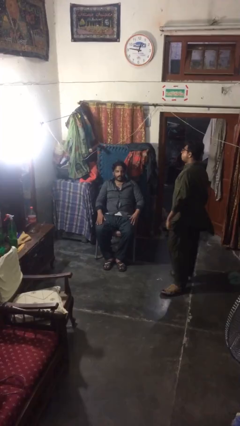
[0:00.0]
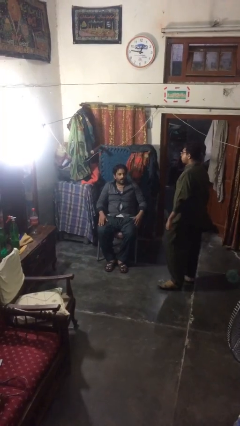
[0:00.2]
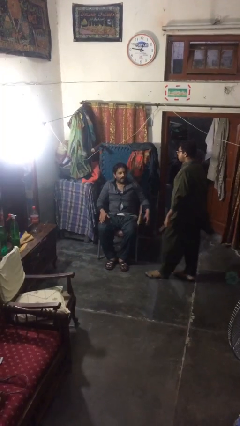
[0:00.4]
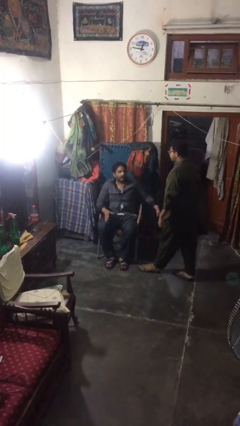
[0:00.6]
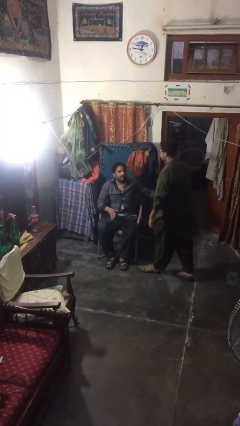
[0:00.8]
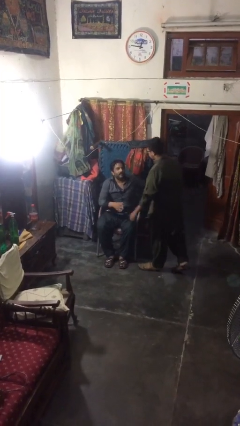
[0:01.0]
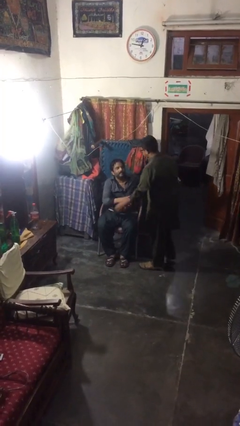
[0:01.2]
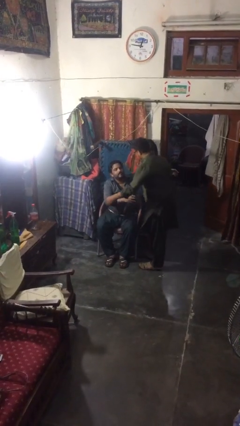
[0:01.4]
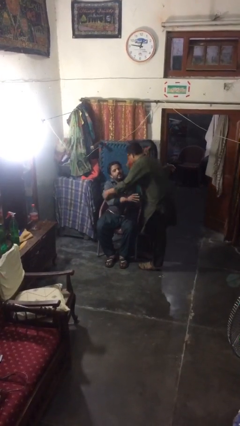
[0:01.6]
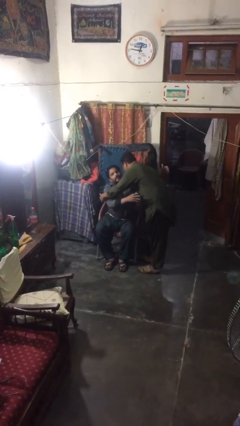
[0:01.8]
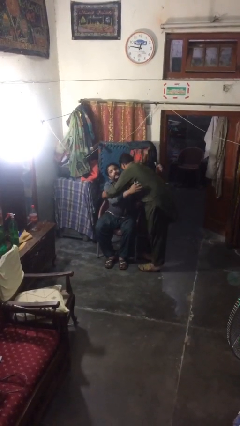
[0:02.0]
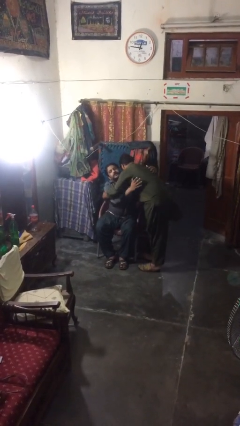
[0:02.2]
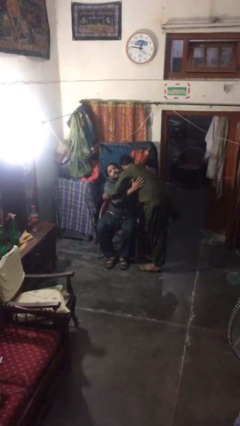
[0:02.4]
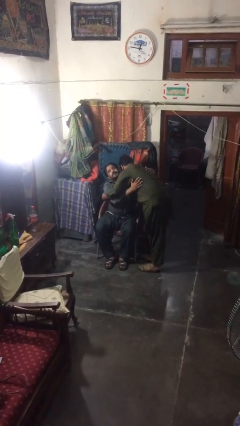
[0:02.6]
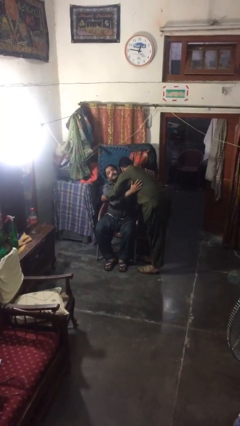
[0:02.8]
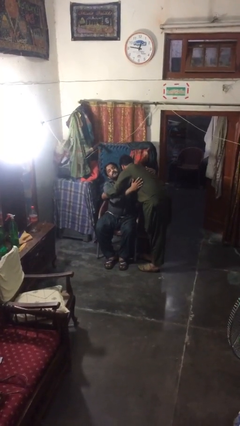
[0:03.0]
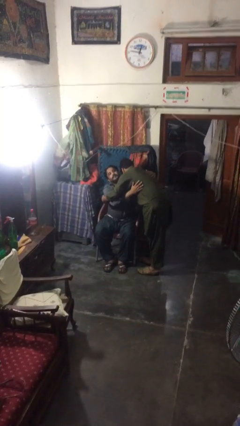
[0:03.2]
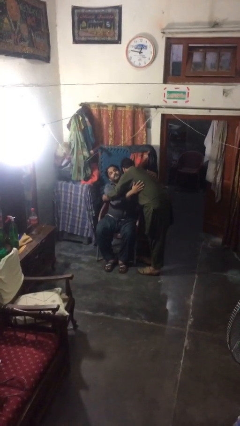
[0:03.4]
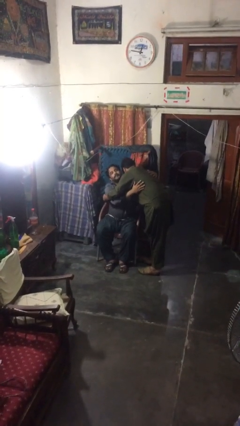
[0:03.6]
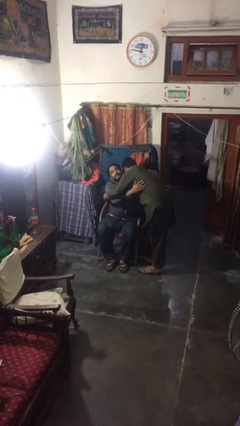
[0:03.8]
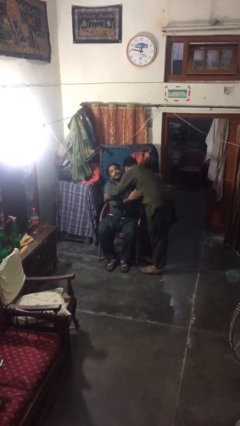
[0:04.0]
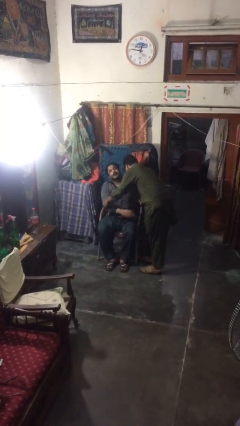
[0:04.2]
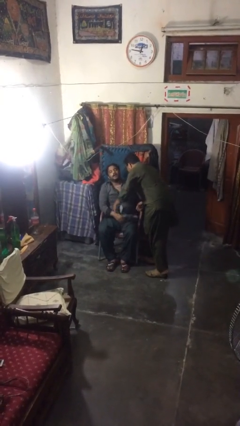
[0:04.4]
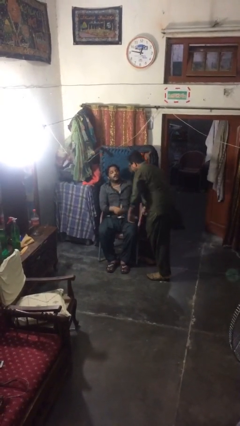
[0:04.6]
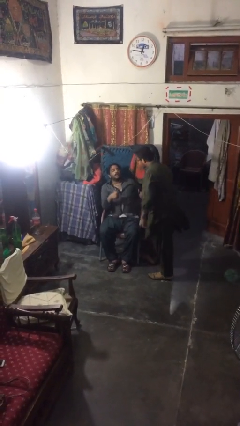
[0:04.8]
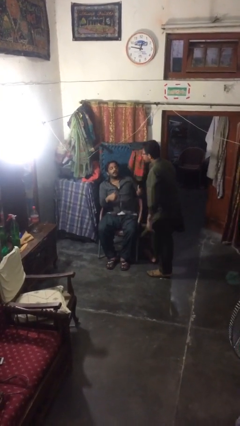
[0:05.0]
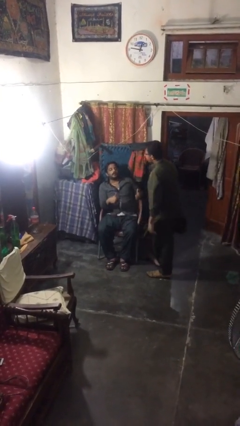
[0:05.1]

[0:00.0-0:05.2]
person embraces person

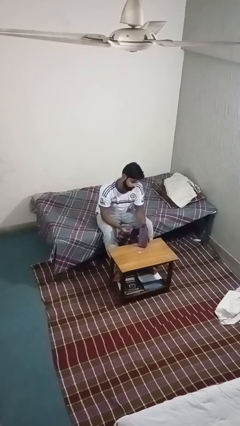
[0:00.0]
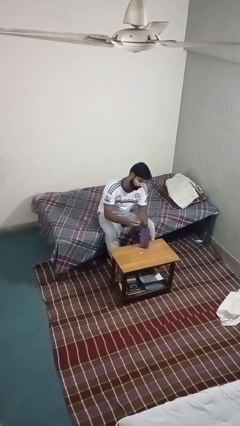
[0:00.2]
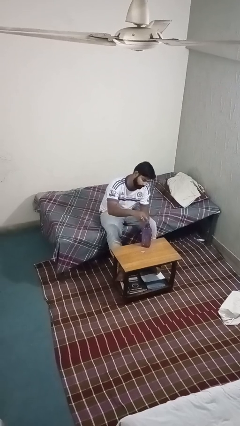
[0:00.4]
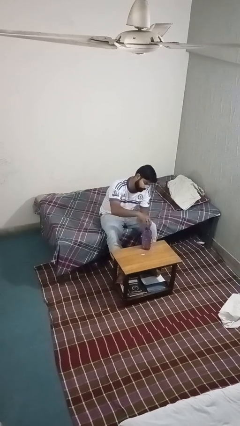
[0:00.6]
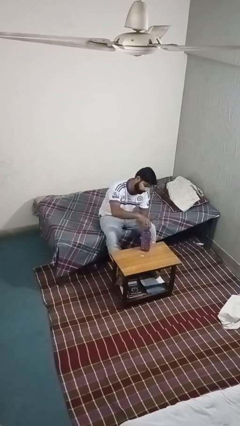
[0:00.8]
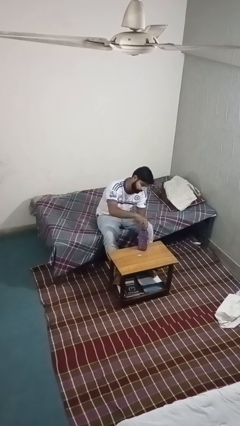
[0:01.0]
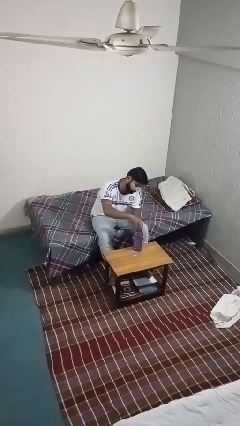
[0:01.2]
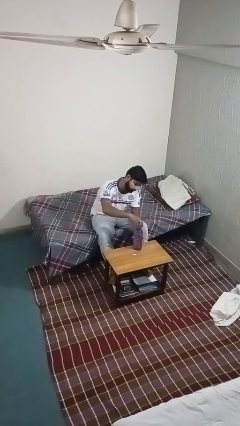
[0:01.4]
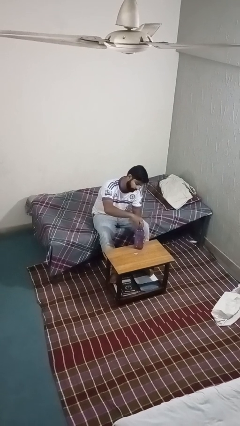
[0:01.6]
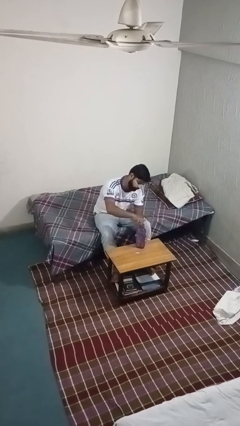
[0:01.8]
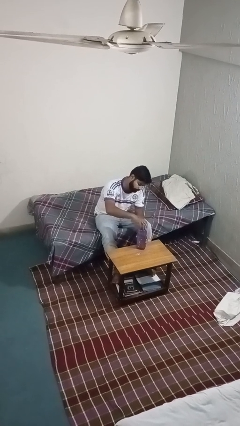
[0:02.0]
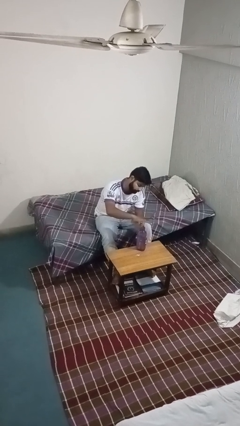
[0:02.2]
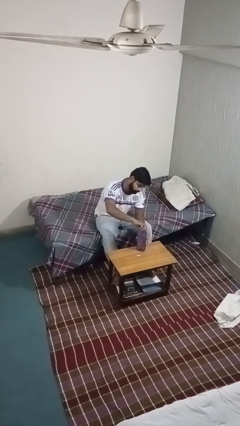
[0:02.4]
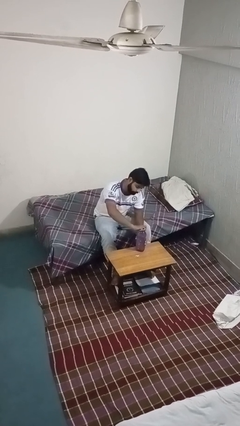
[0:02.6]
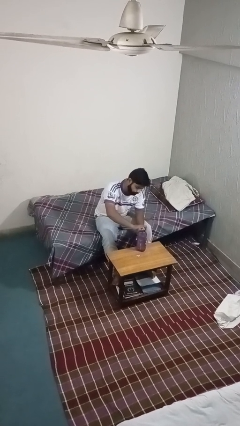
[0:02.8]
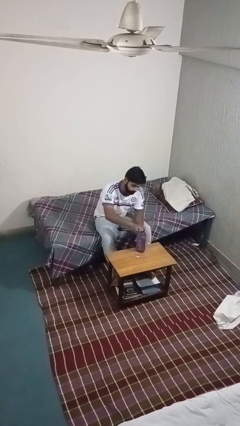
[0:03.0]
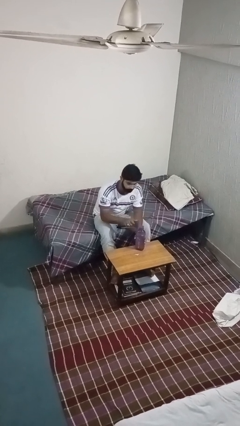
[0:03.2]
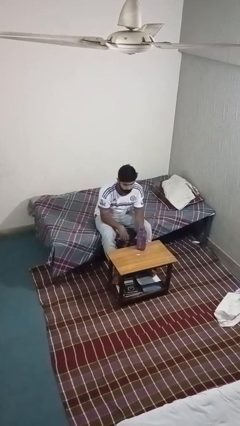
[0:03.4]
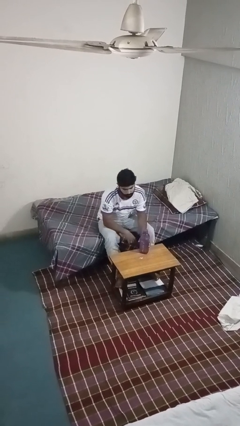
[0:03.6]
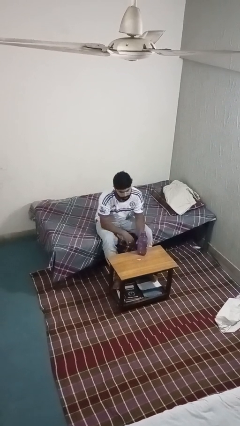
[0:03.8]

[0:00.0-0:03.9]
person screws lid to bottle

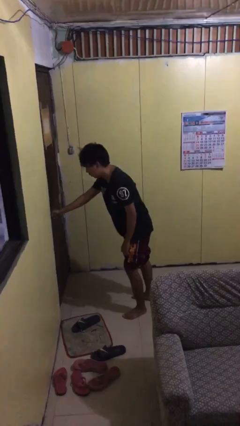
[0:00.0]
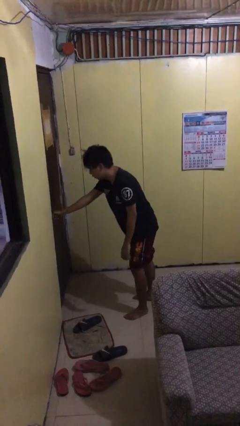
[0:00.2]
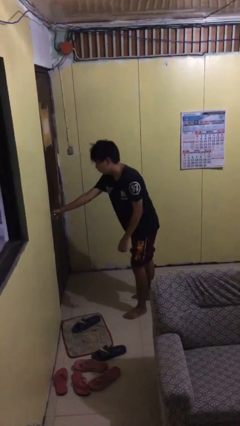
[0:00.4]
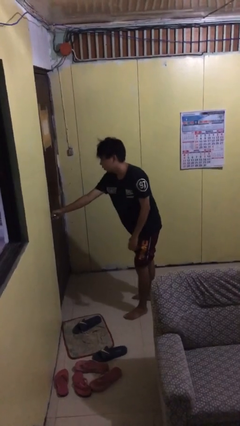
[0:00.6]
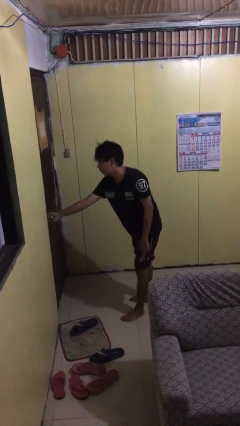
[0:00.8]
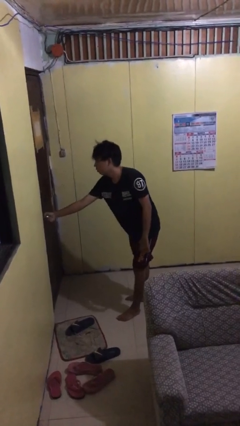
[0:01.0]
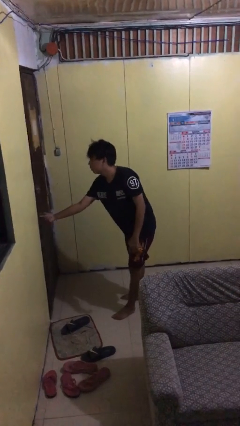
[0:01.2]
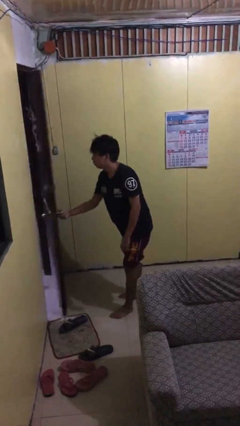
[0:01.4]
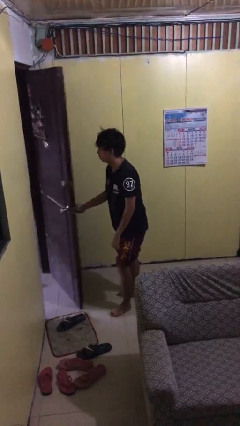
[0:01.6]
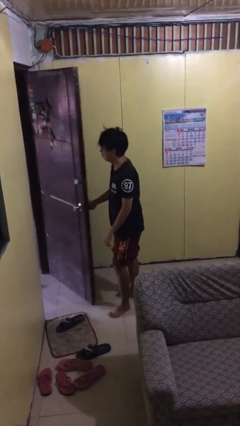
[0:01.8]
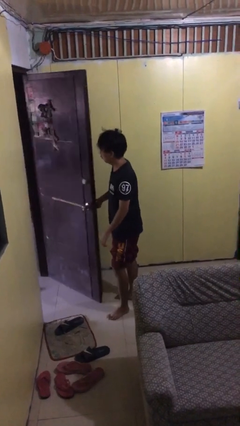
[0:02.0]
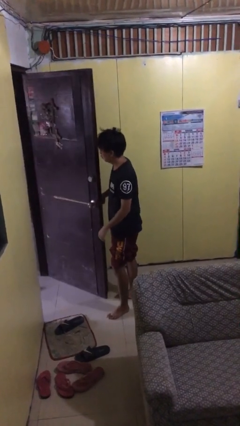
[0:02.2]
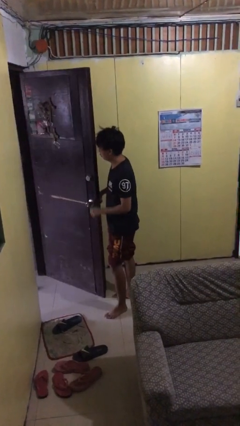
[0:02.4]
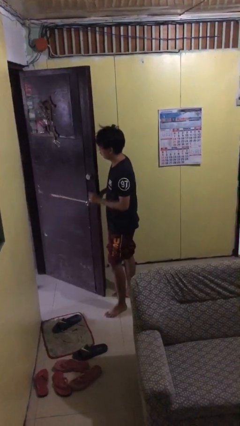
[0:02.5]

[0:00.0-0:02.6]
person opens facility door

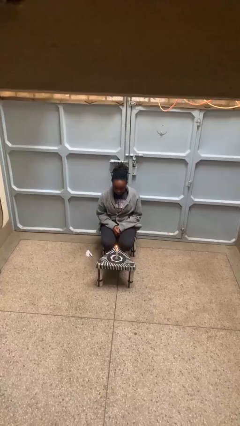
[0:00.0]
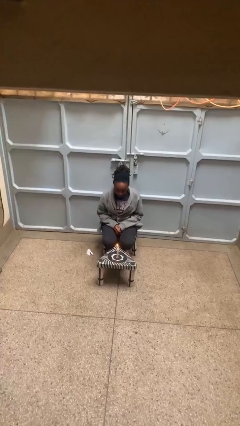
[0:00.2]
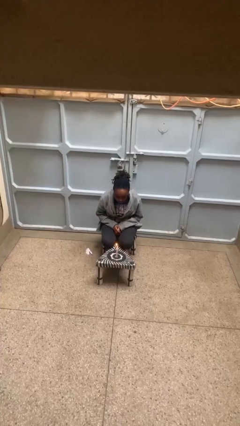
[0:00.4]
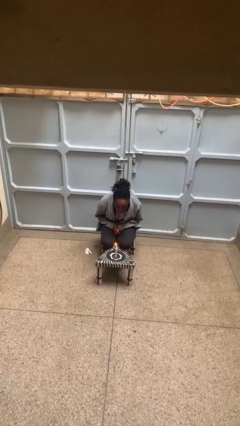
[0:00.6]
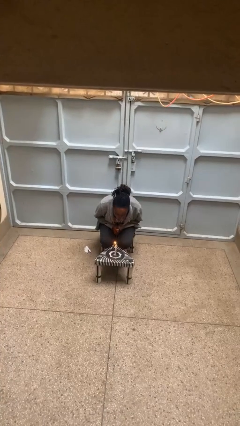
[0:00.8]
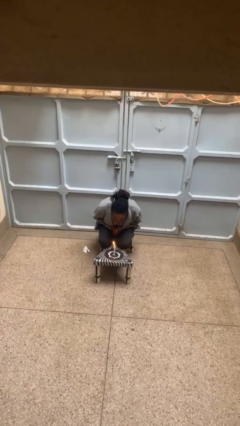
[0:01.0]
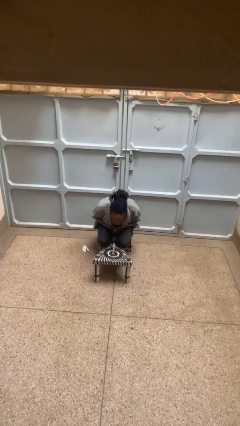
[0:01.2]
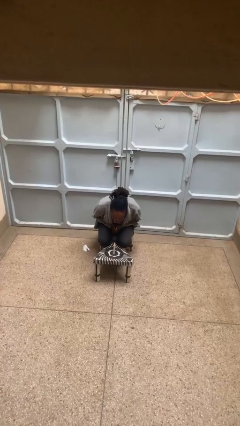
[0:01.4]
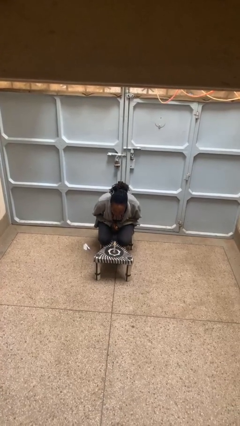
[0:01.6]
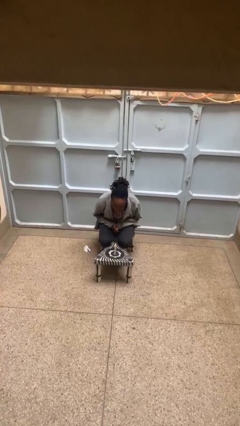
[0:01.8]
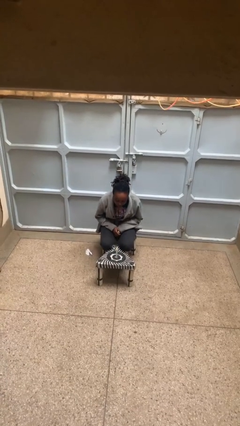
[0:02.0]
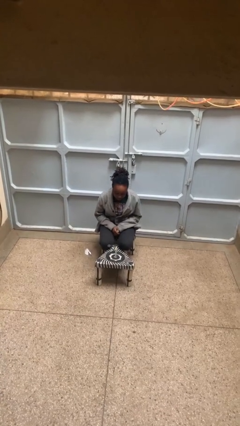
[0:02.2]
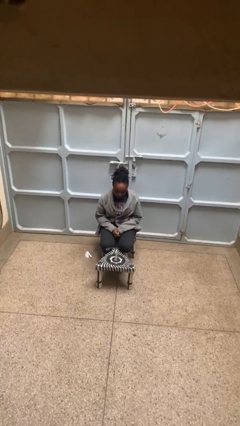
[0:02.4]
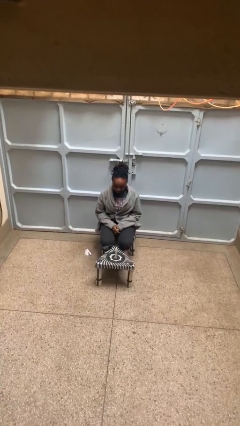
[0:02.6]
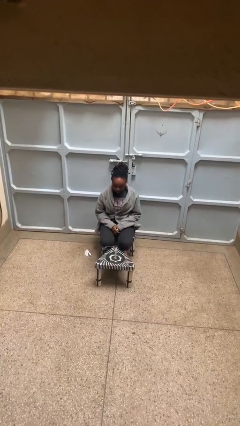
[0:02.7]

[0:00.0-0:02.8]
person extinguishes candle

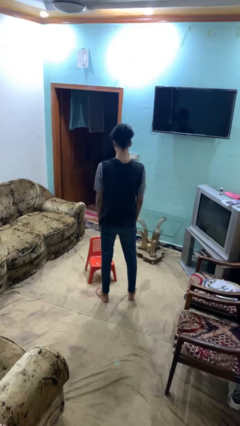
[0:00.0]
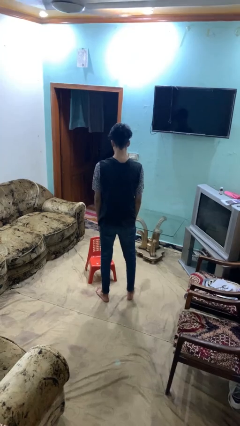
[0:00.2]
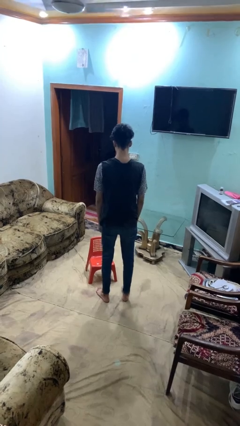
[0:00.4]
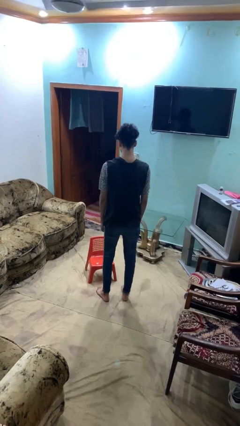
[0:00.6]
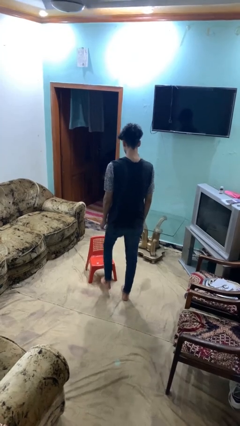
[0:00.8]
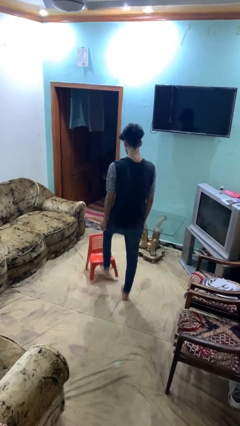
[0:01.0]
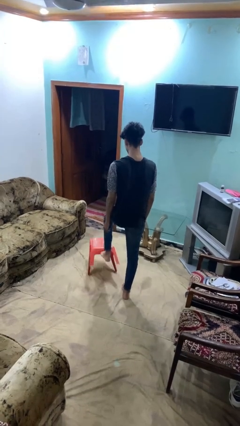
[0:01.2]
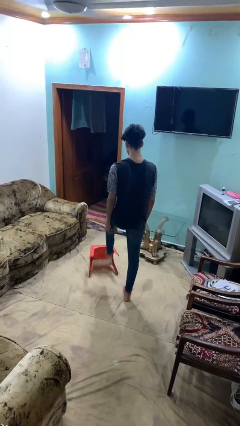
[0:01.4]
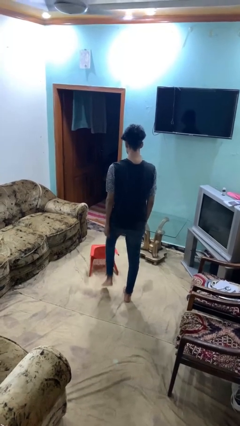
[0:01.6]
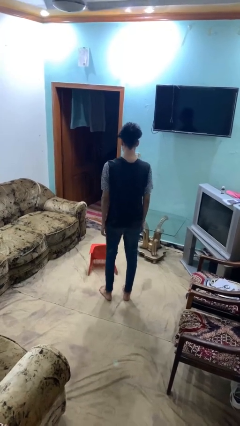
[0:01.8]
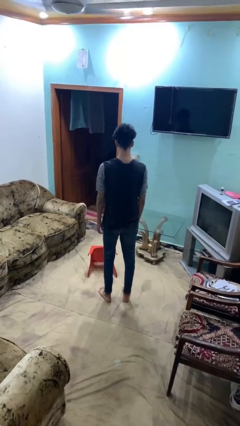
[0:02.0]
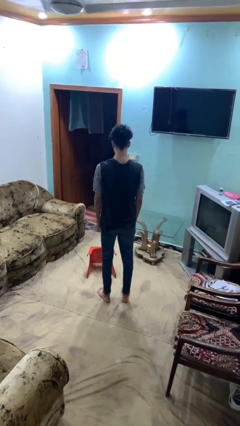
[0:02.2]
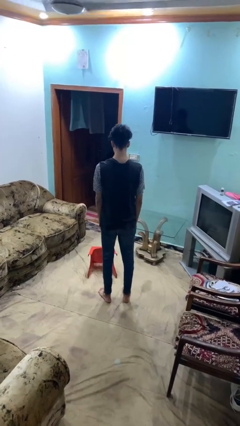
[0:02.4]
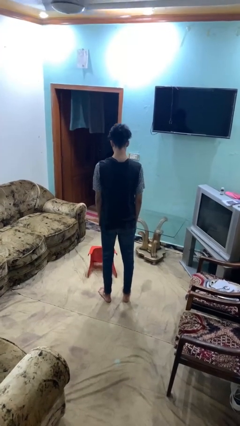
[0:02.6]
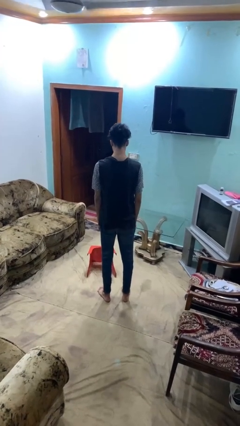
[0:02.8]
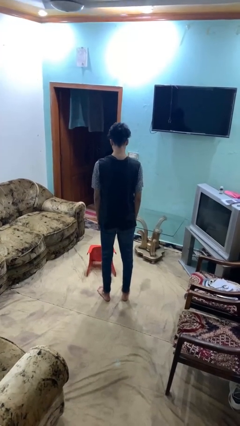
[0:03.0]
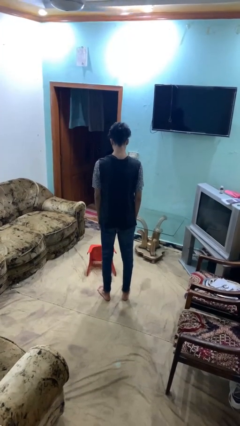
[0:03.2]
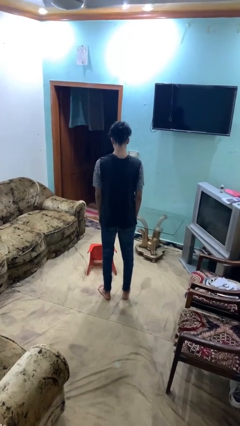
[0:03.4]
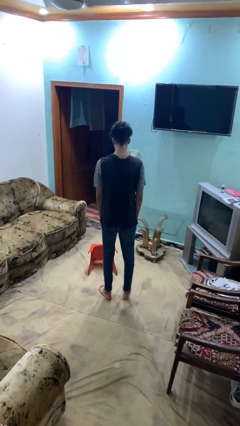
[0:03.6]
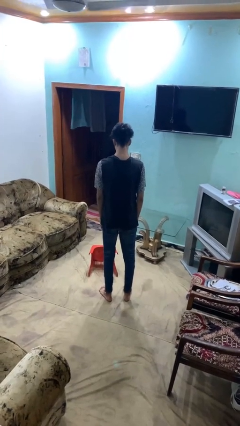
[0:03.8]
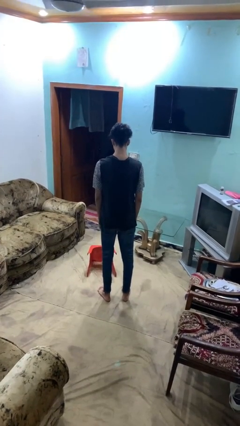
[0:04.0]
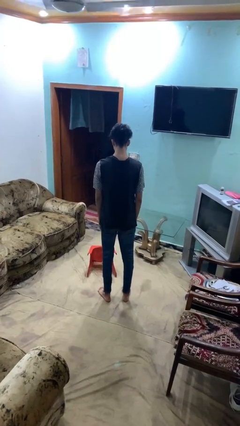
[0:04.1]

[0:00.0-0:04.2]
person knocks over furniture
